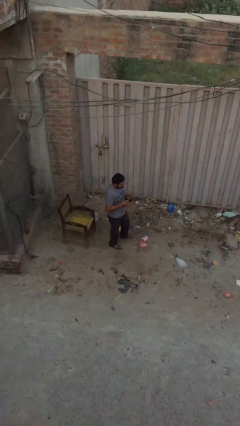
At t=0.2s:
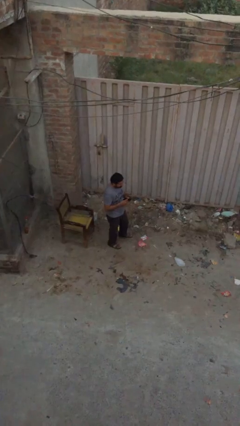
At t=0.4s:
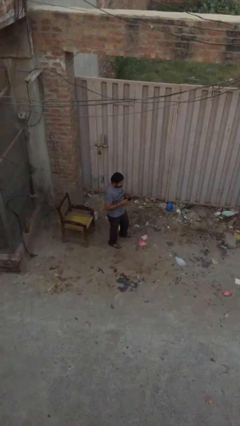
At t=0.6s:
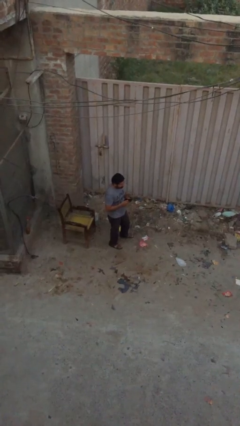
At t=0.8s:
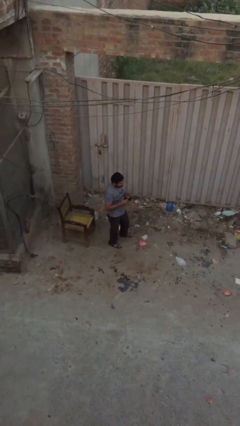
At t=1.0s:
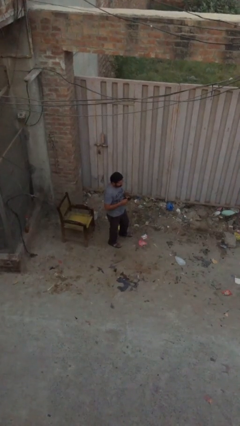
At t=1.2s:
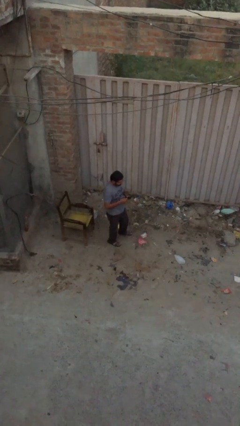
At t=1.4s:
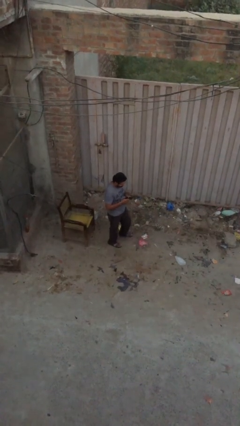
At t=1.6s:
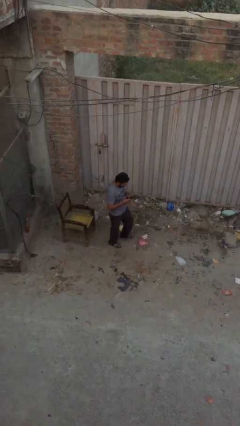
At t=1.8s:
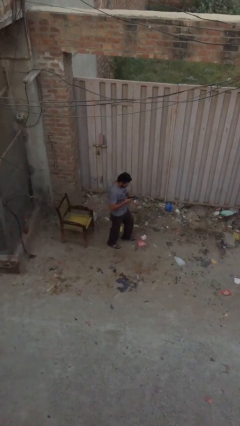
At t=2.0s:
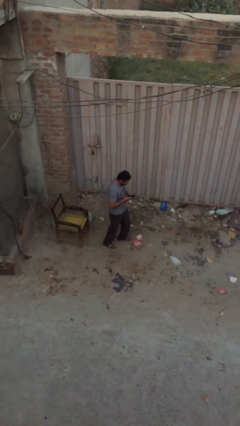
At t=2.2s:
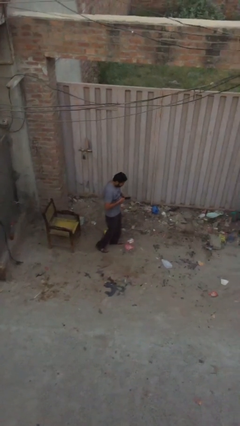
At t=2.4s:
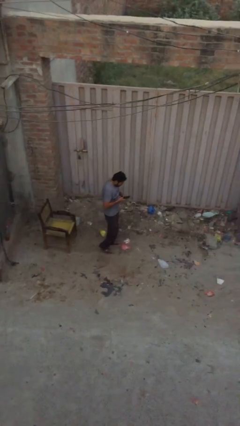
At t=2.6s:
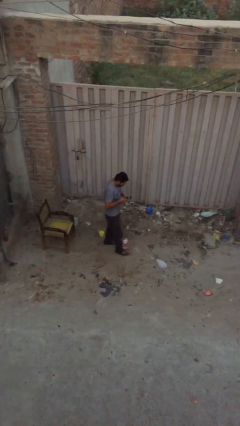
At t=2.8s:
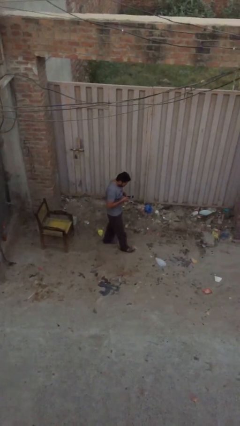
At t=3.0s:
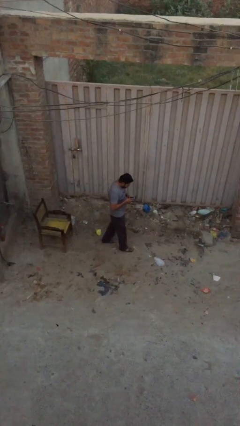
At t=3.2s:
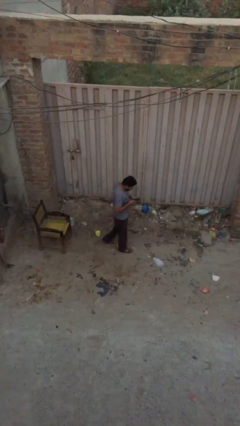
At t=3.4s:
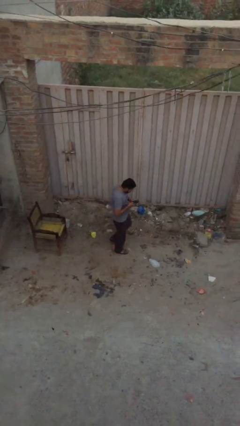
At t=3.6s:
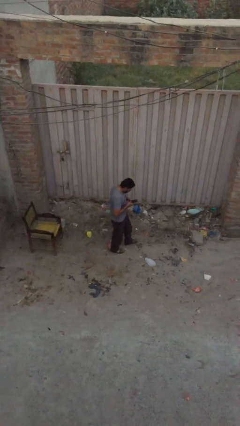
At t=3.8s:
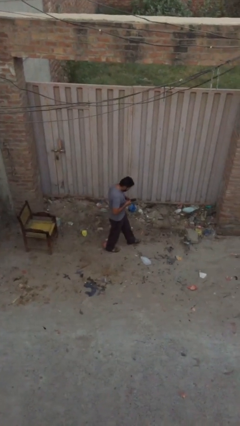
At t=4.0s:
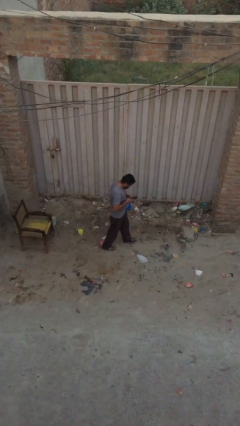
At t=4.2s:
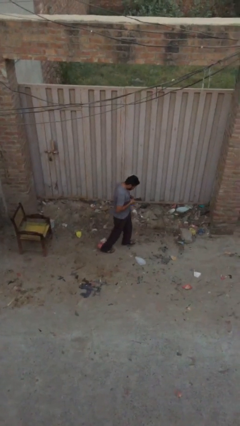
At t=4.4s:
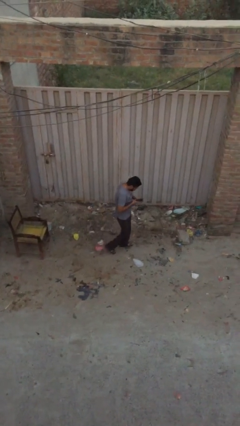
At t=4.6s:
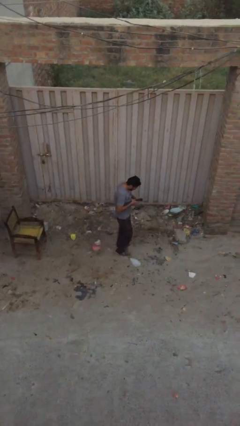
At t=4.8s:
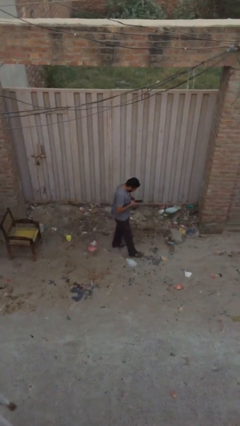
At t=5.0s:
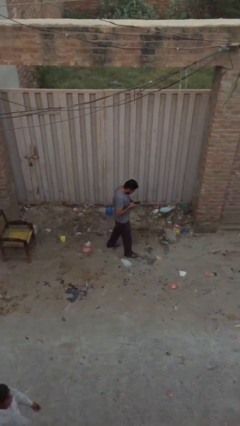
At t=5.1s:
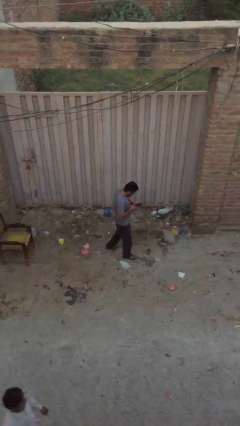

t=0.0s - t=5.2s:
person texts on phone

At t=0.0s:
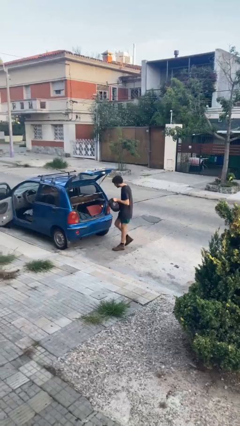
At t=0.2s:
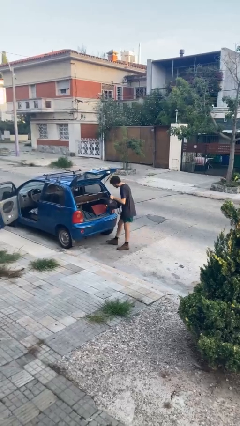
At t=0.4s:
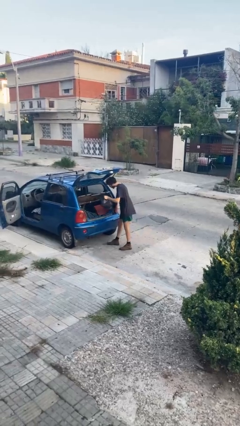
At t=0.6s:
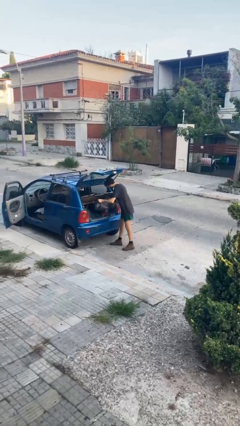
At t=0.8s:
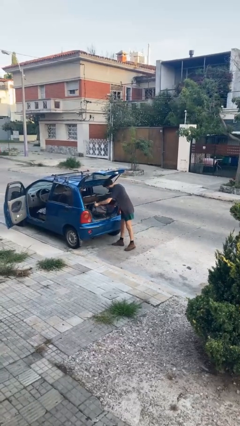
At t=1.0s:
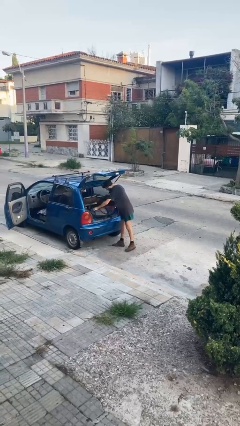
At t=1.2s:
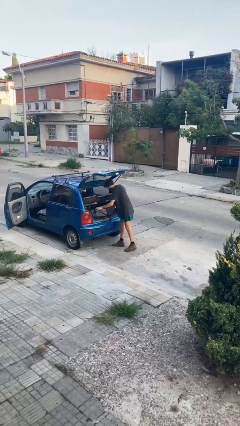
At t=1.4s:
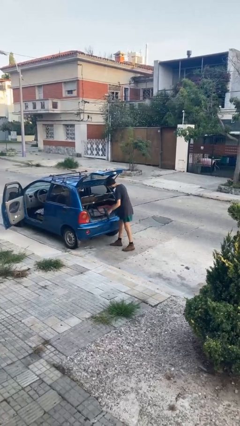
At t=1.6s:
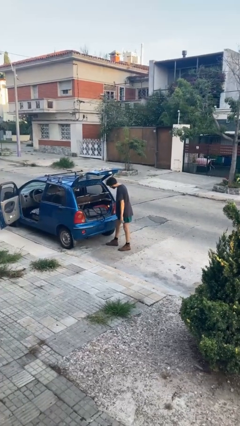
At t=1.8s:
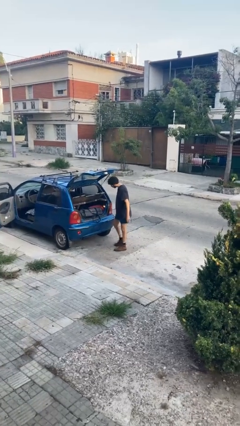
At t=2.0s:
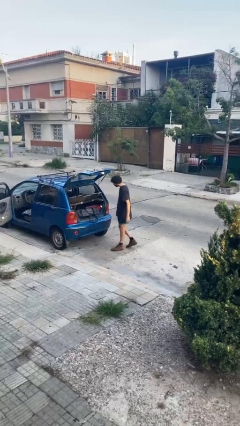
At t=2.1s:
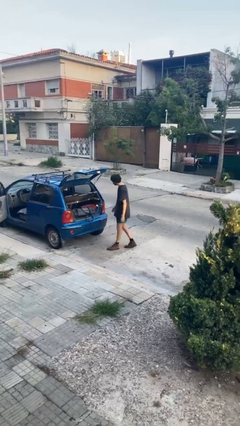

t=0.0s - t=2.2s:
person loads car

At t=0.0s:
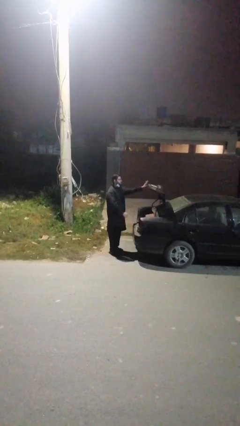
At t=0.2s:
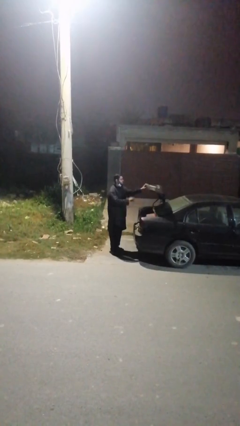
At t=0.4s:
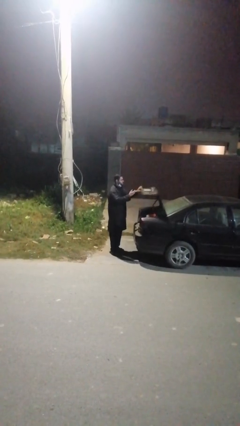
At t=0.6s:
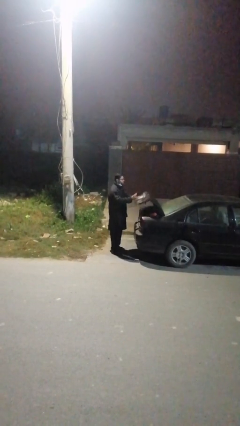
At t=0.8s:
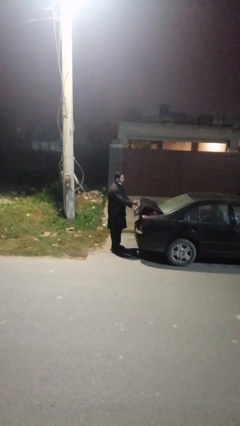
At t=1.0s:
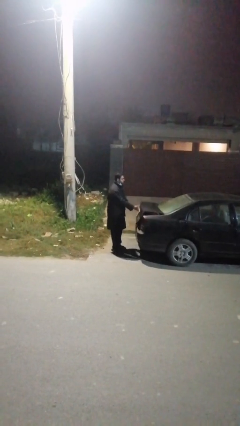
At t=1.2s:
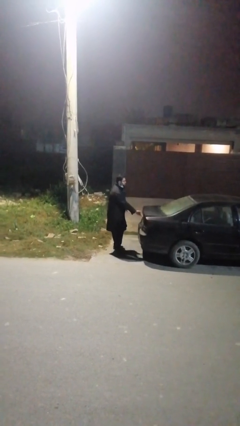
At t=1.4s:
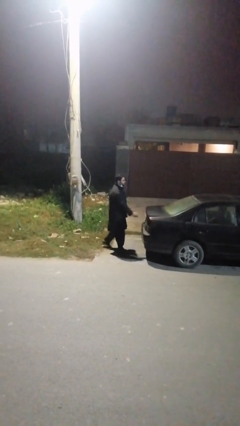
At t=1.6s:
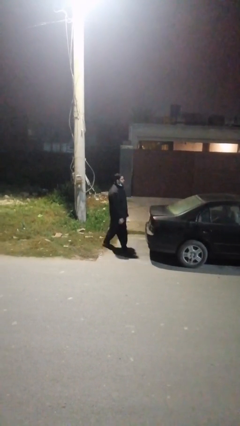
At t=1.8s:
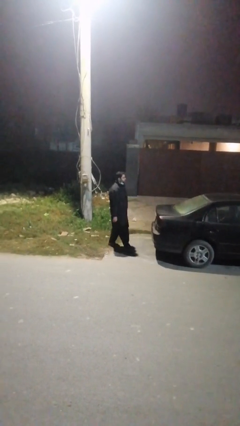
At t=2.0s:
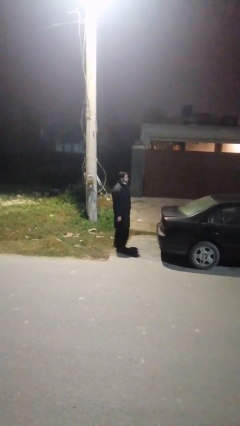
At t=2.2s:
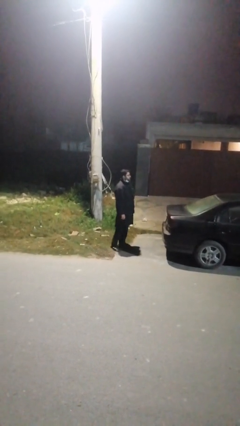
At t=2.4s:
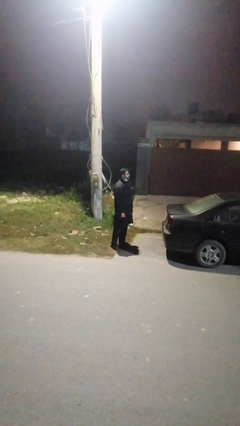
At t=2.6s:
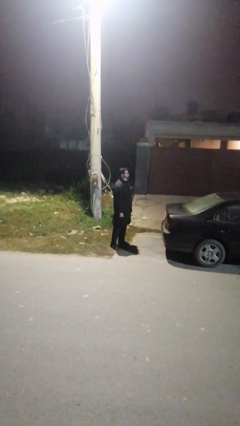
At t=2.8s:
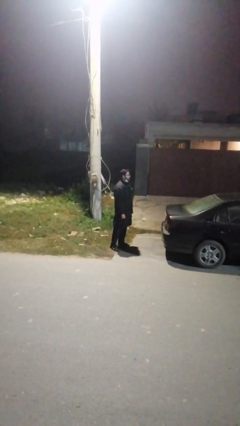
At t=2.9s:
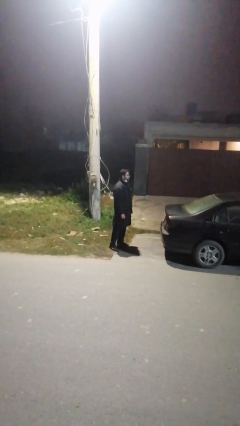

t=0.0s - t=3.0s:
person closes car trunk

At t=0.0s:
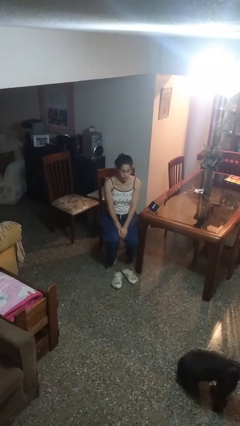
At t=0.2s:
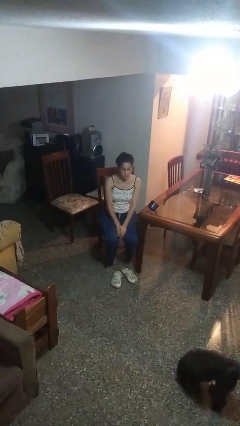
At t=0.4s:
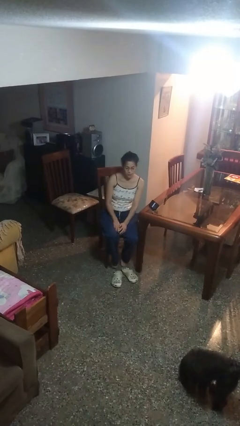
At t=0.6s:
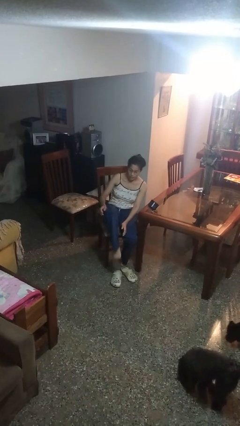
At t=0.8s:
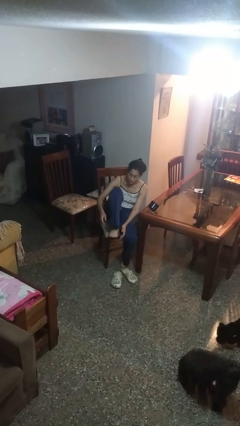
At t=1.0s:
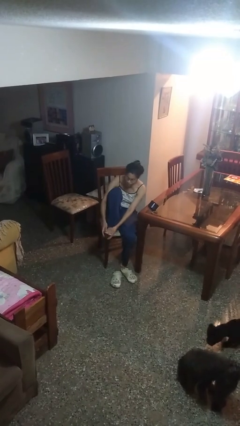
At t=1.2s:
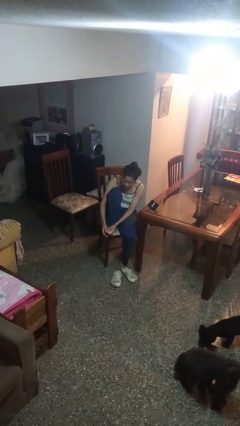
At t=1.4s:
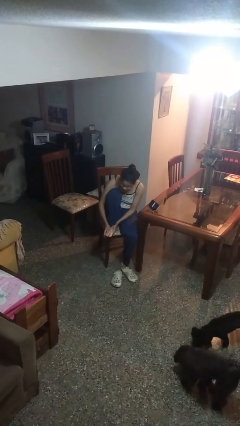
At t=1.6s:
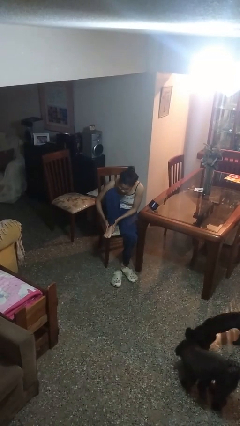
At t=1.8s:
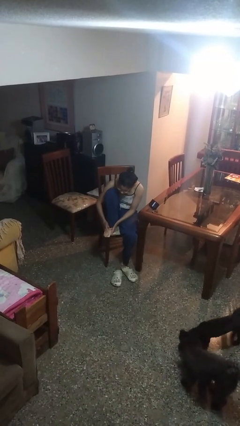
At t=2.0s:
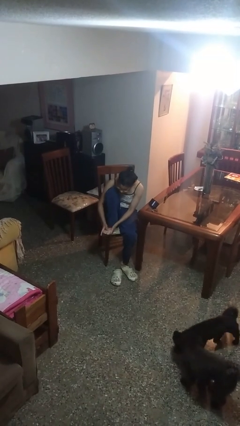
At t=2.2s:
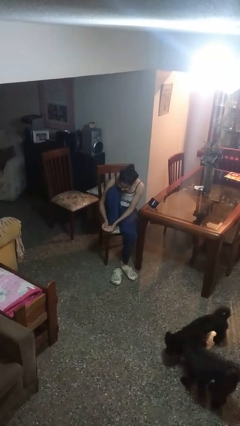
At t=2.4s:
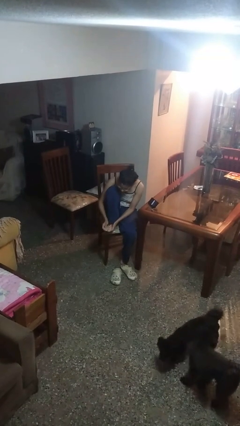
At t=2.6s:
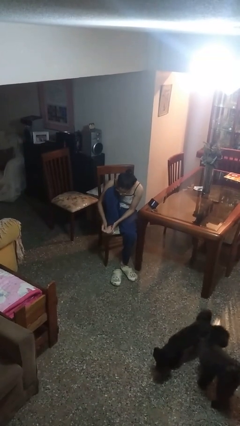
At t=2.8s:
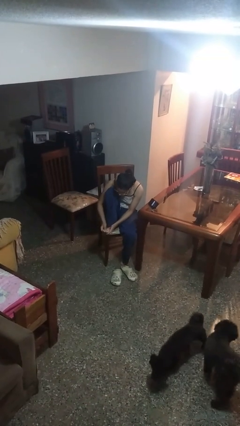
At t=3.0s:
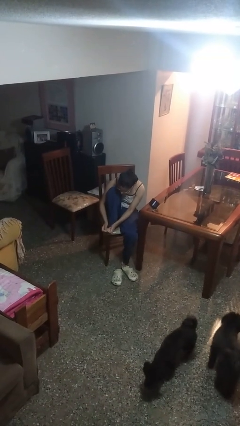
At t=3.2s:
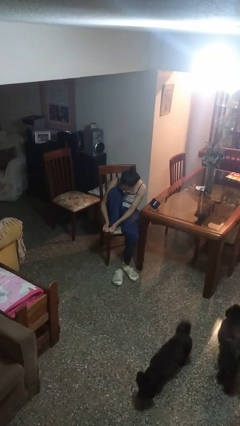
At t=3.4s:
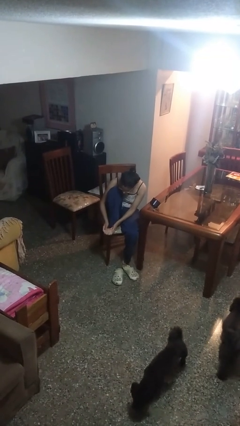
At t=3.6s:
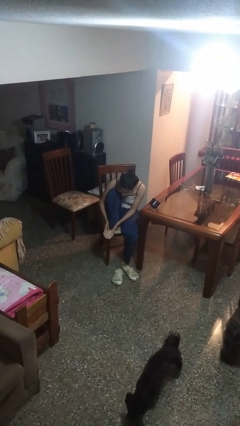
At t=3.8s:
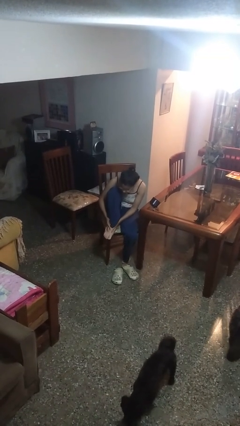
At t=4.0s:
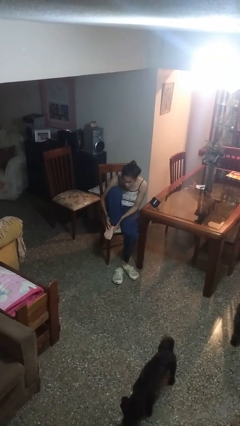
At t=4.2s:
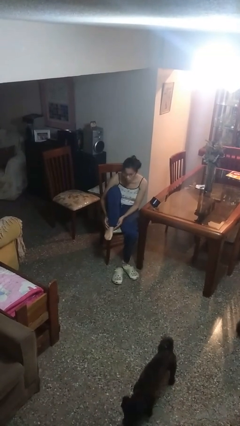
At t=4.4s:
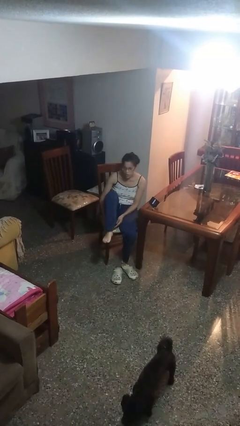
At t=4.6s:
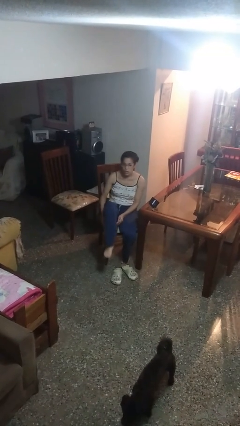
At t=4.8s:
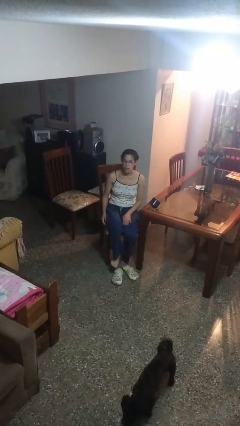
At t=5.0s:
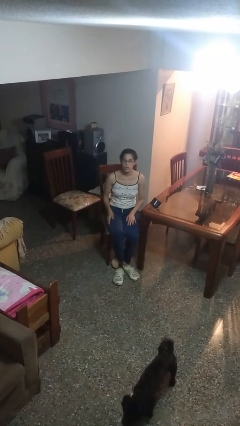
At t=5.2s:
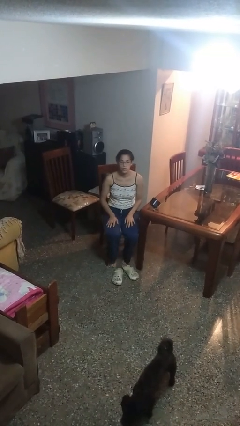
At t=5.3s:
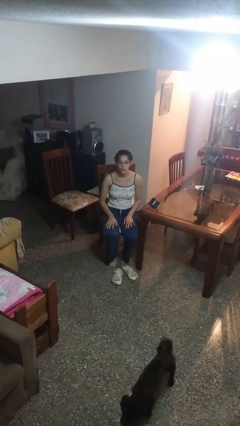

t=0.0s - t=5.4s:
person rubs foot

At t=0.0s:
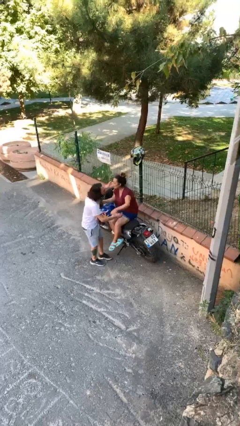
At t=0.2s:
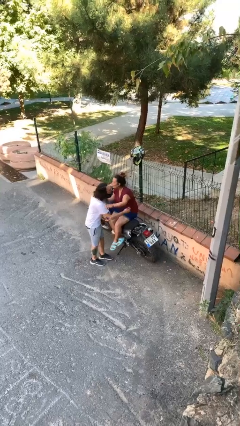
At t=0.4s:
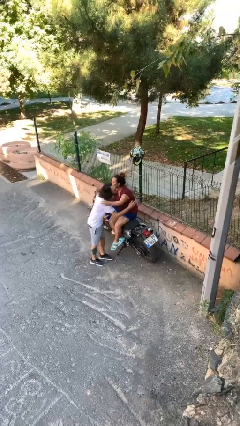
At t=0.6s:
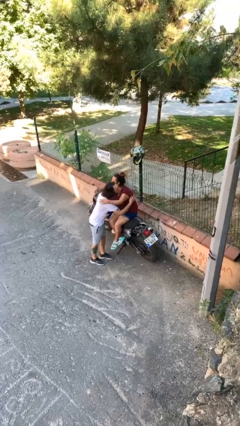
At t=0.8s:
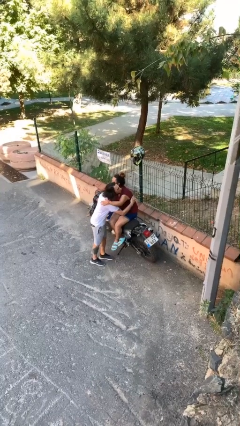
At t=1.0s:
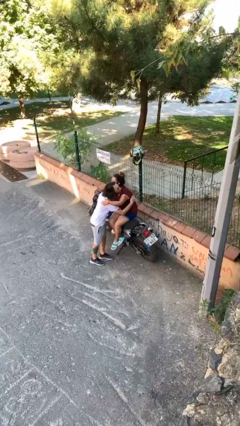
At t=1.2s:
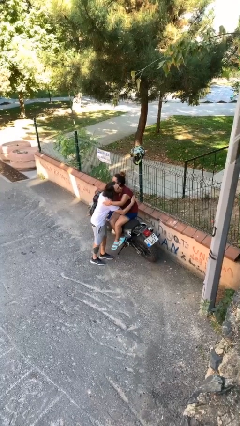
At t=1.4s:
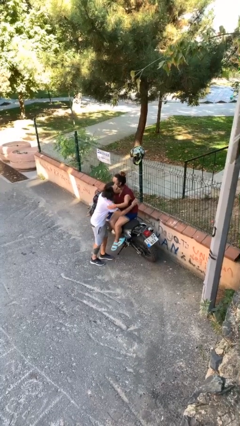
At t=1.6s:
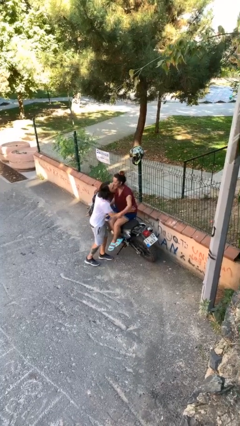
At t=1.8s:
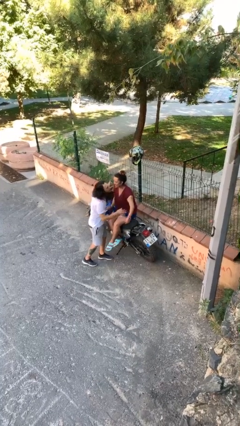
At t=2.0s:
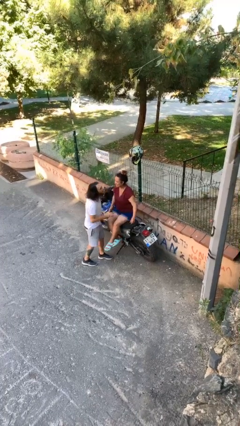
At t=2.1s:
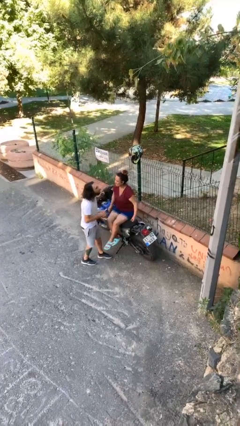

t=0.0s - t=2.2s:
person embraces person
